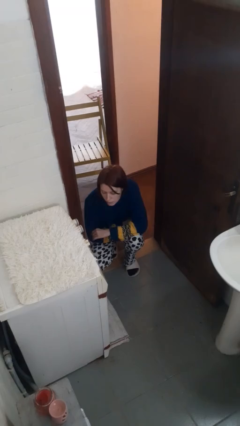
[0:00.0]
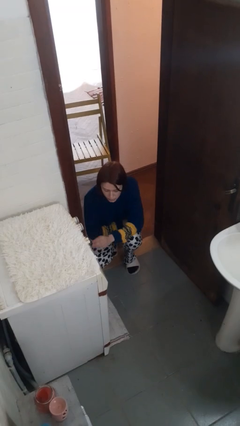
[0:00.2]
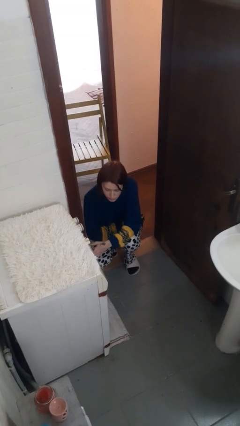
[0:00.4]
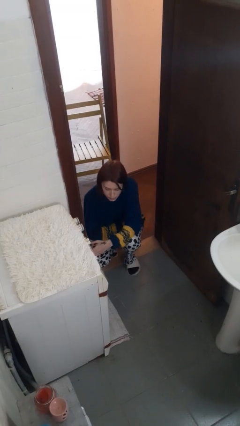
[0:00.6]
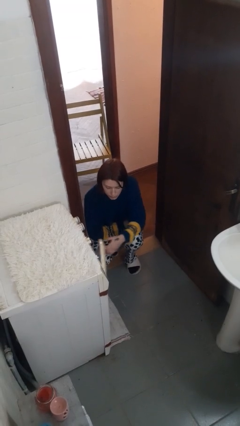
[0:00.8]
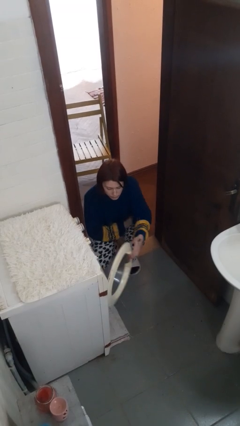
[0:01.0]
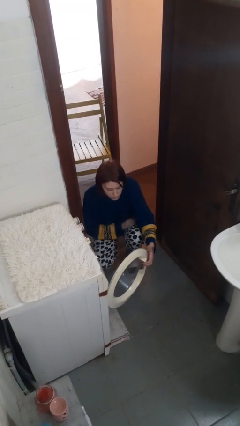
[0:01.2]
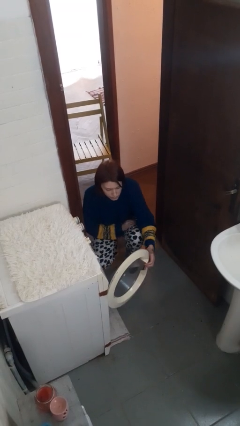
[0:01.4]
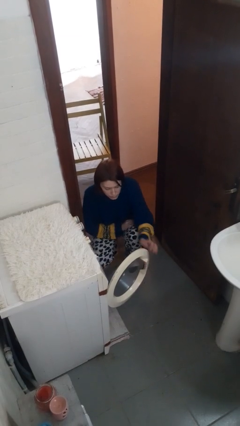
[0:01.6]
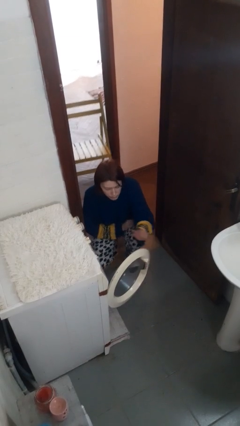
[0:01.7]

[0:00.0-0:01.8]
person opens clothes washer

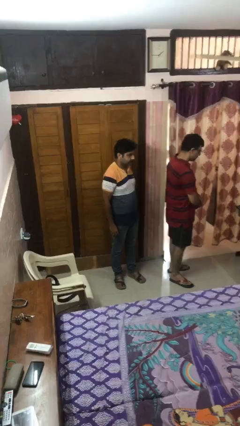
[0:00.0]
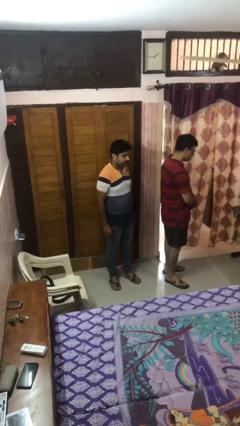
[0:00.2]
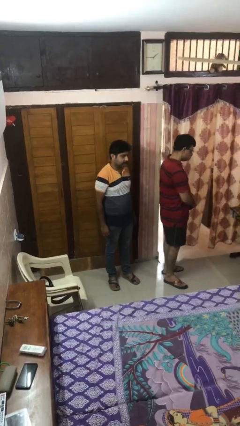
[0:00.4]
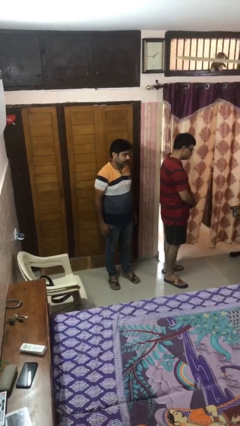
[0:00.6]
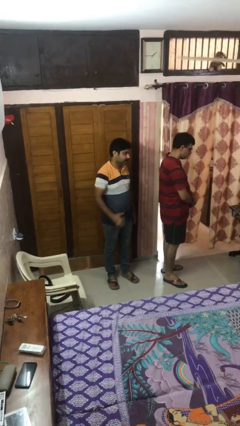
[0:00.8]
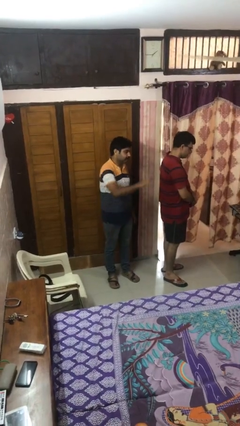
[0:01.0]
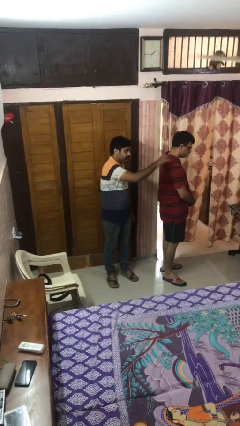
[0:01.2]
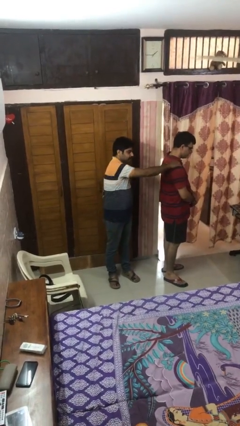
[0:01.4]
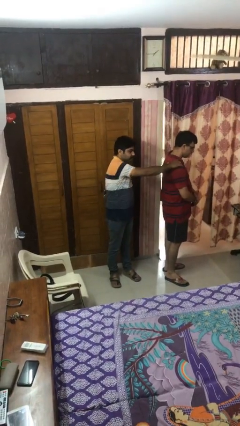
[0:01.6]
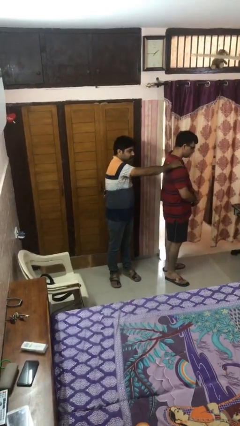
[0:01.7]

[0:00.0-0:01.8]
person grabs person by shoulder

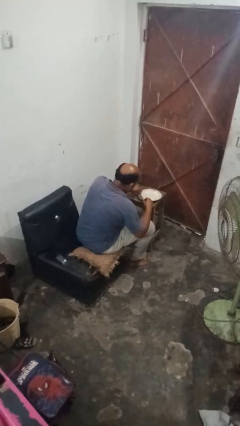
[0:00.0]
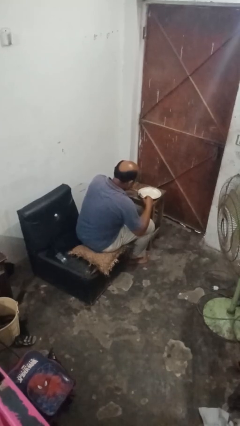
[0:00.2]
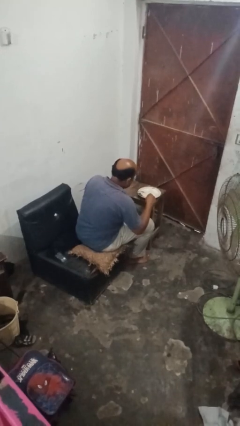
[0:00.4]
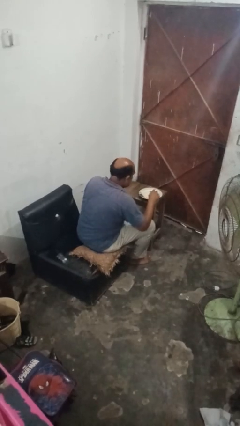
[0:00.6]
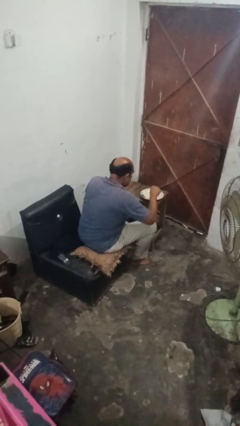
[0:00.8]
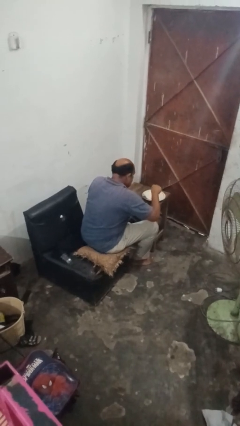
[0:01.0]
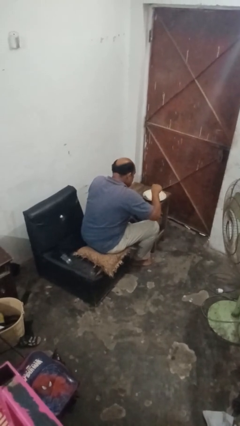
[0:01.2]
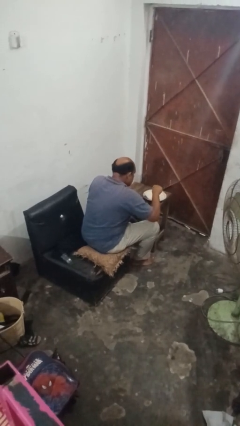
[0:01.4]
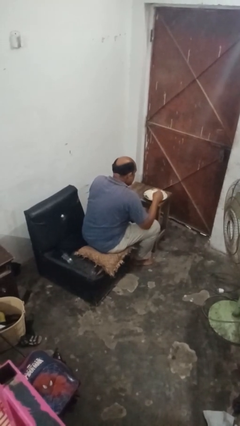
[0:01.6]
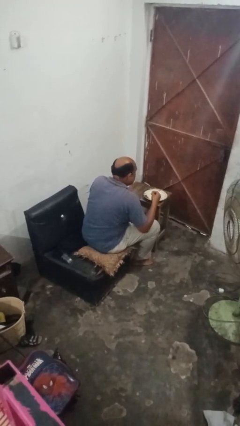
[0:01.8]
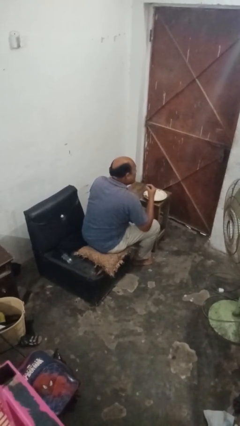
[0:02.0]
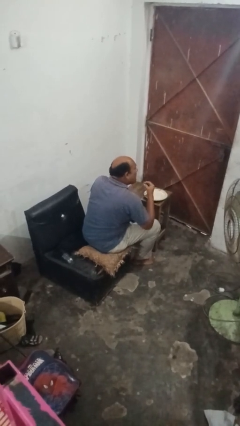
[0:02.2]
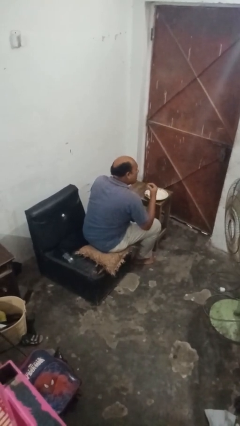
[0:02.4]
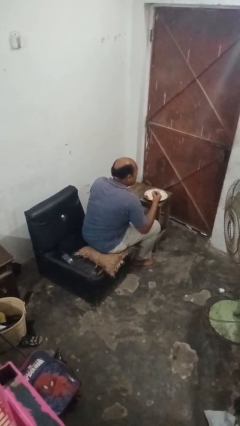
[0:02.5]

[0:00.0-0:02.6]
person eats with utensil

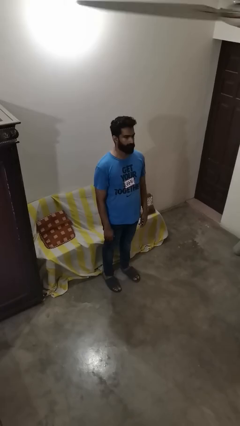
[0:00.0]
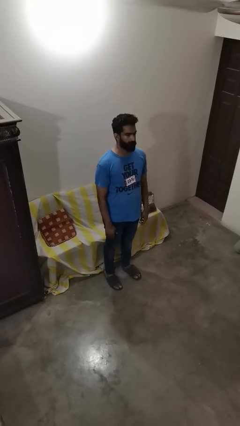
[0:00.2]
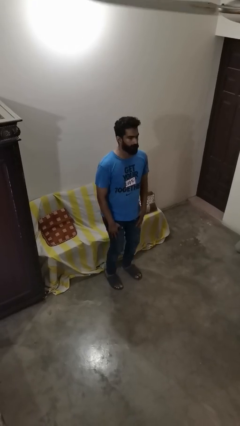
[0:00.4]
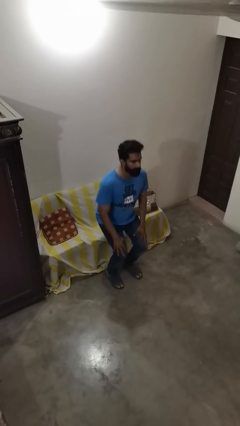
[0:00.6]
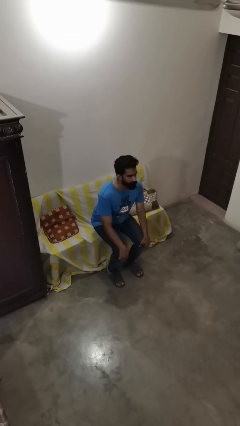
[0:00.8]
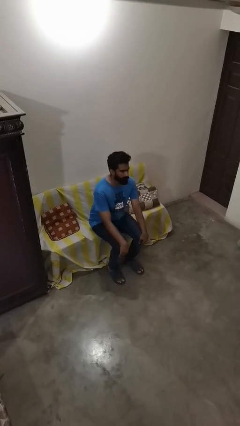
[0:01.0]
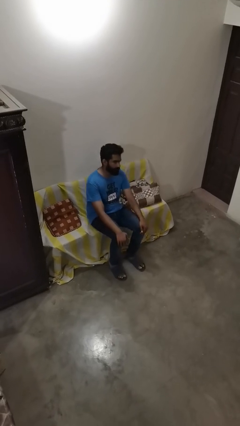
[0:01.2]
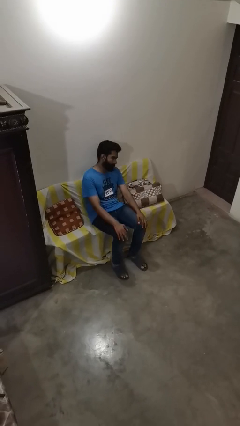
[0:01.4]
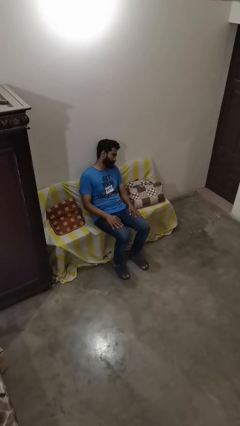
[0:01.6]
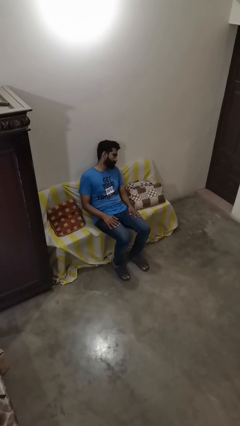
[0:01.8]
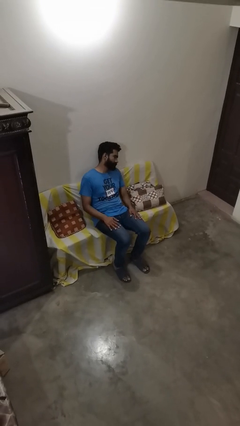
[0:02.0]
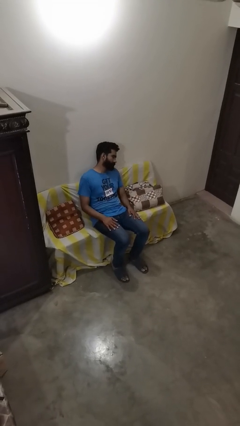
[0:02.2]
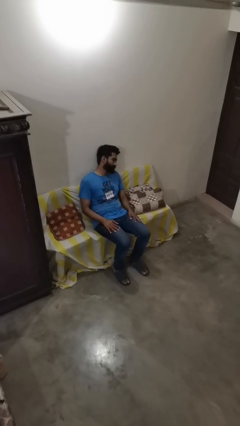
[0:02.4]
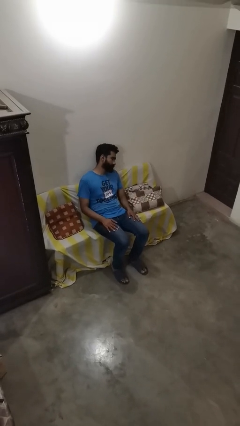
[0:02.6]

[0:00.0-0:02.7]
person lies down on couch

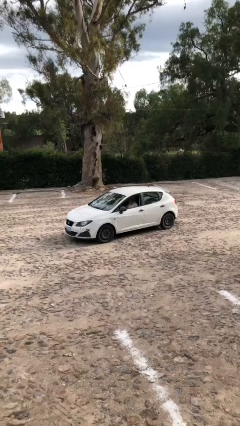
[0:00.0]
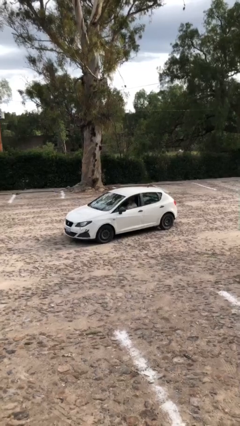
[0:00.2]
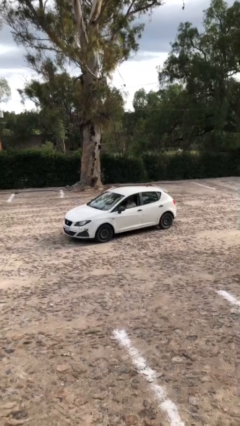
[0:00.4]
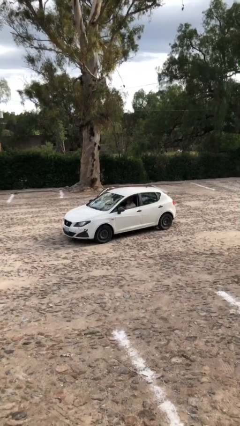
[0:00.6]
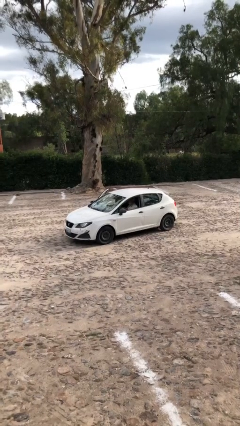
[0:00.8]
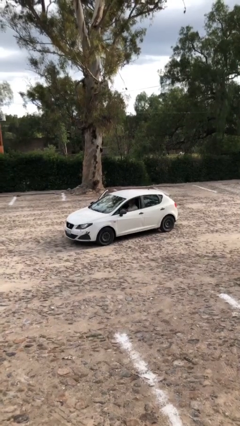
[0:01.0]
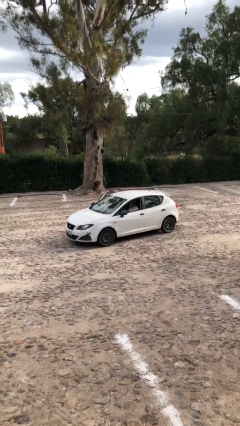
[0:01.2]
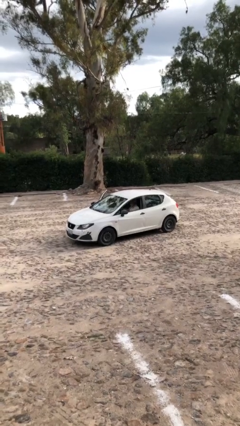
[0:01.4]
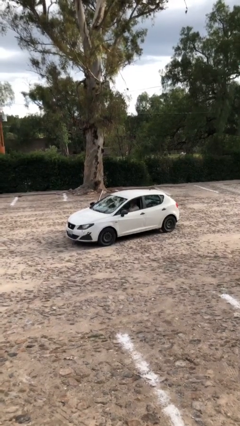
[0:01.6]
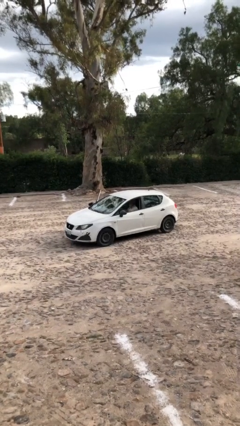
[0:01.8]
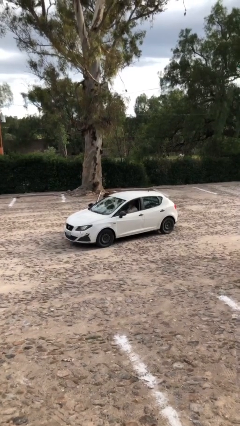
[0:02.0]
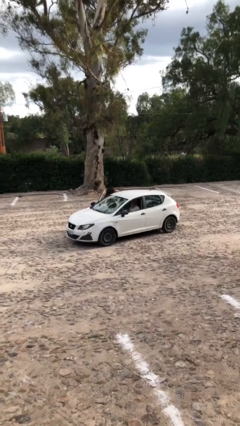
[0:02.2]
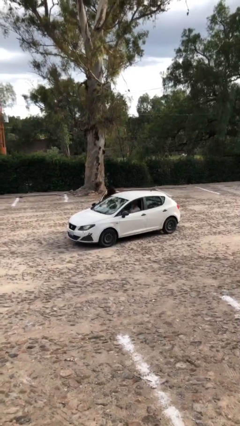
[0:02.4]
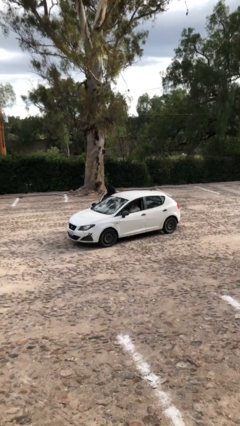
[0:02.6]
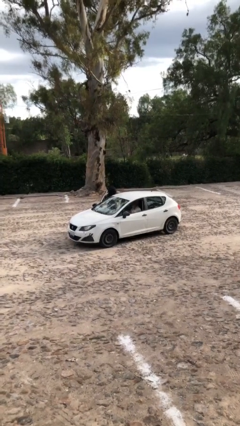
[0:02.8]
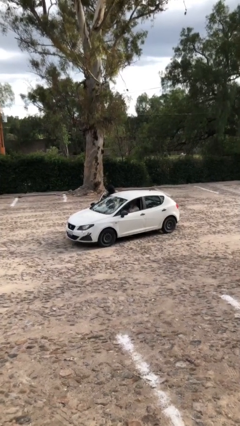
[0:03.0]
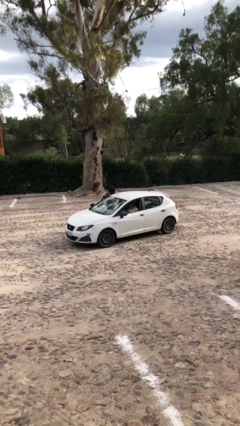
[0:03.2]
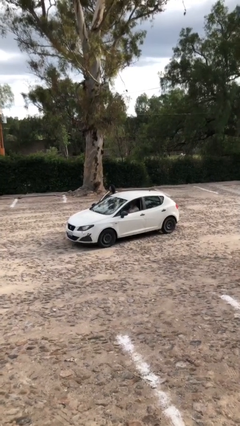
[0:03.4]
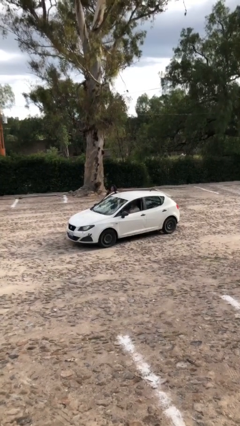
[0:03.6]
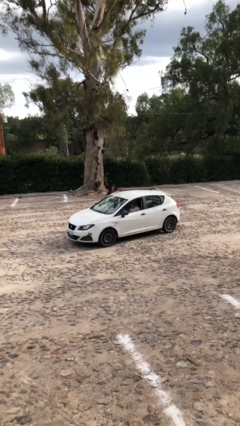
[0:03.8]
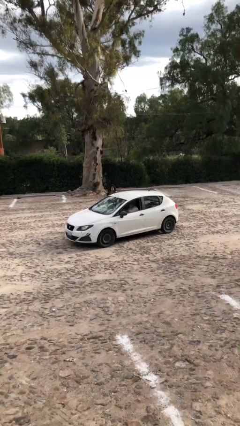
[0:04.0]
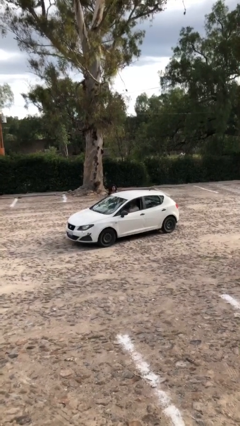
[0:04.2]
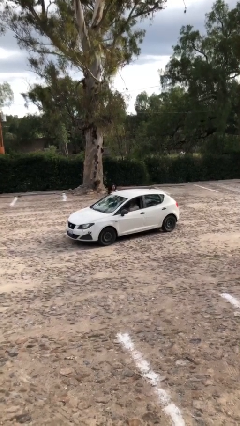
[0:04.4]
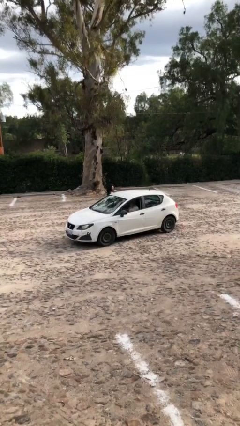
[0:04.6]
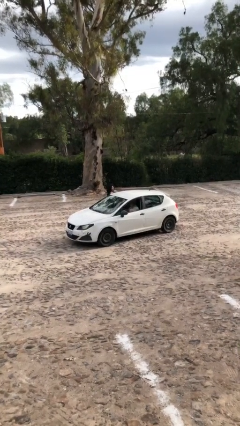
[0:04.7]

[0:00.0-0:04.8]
car drops off person

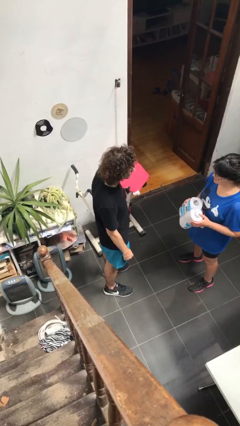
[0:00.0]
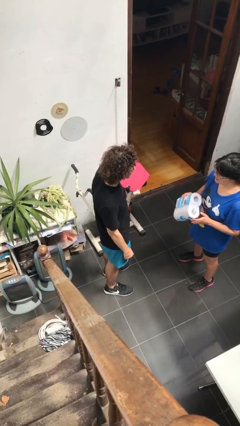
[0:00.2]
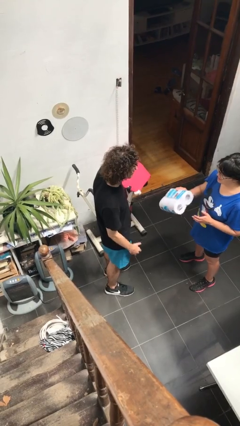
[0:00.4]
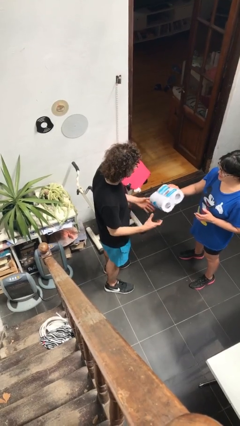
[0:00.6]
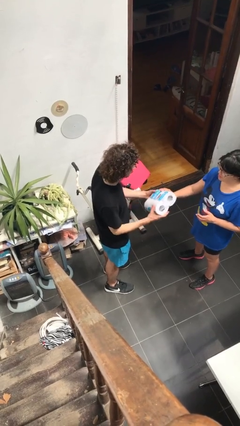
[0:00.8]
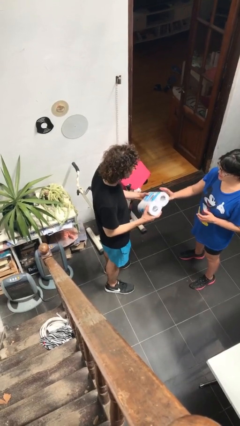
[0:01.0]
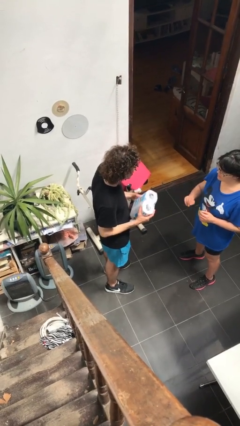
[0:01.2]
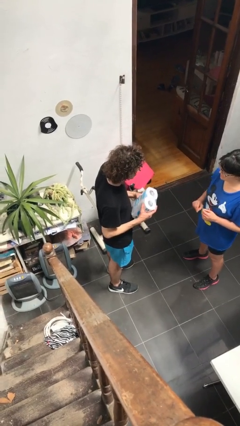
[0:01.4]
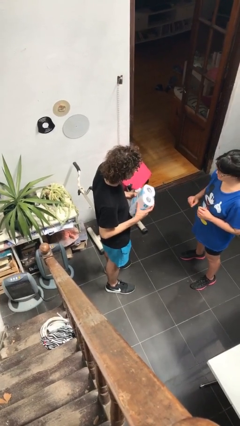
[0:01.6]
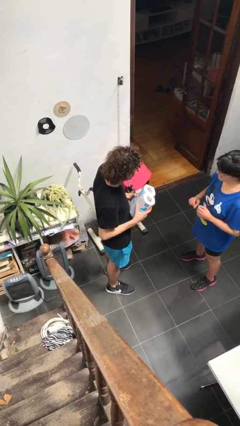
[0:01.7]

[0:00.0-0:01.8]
person transfers object to person

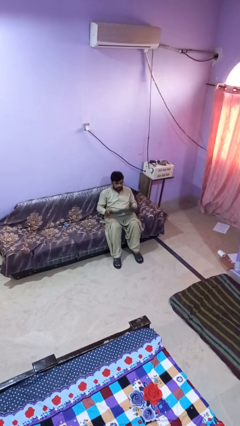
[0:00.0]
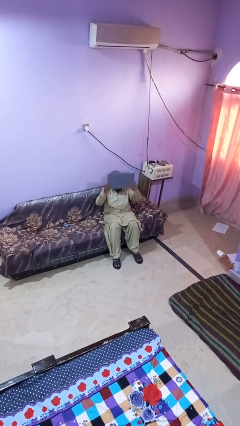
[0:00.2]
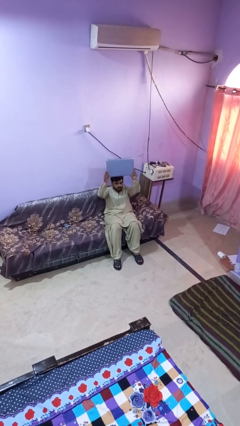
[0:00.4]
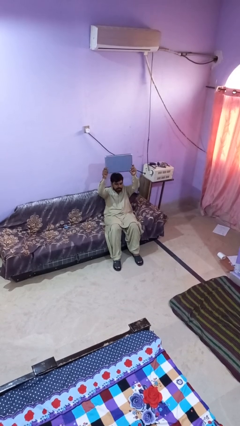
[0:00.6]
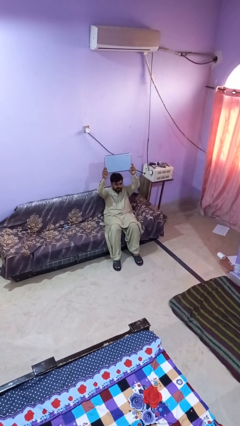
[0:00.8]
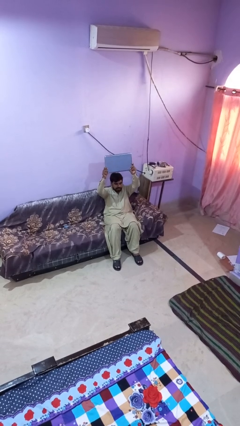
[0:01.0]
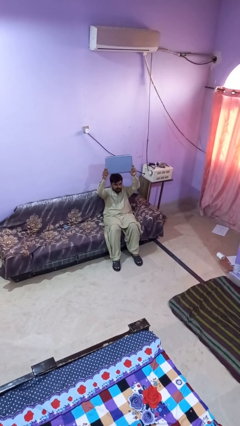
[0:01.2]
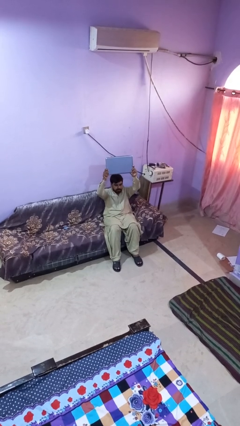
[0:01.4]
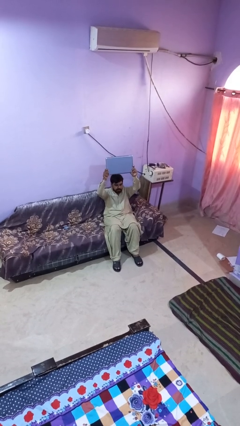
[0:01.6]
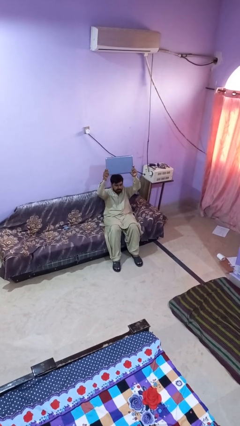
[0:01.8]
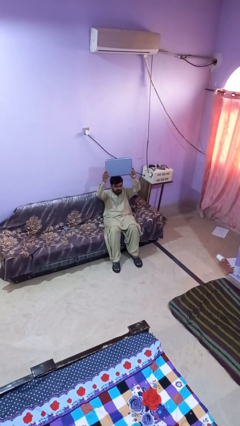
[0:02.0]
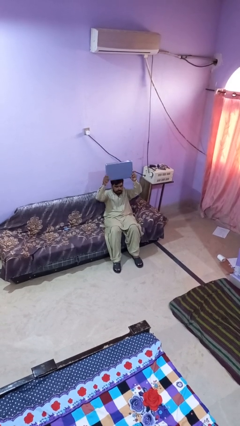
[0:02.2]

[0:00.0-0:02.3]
person holds object above head
